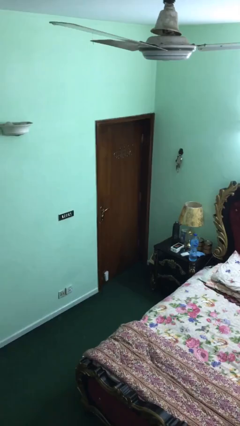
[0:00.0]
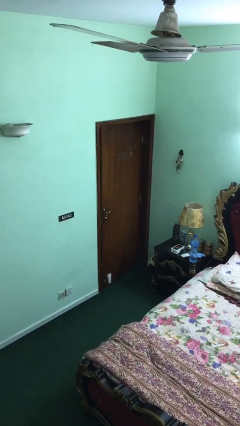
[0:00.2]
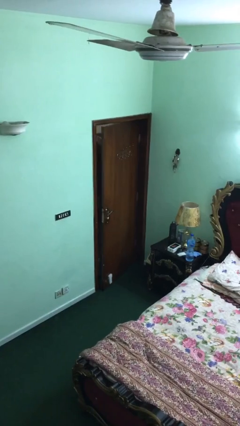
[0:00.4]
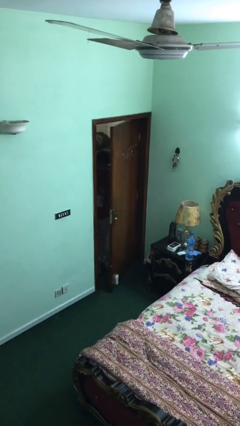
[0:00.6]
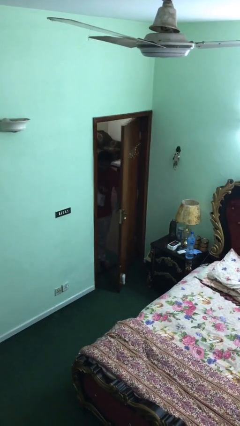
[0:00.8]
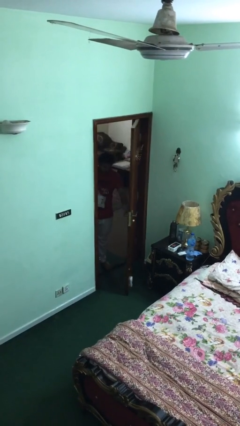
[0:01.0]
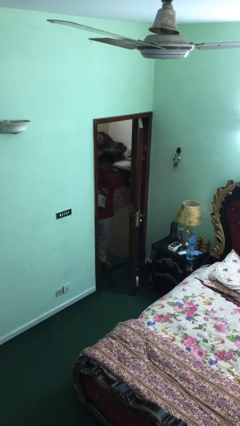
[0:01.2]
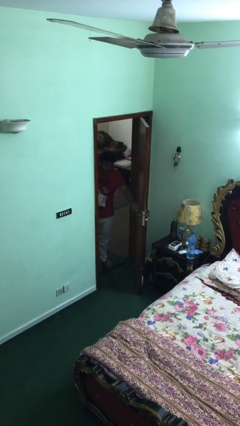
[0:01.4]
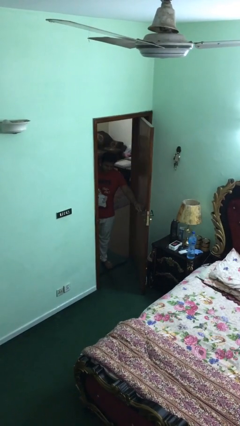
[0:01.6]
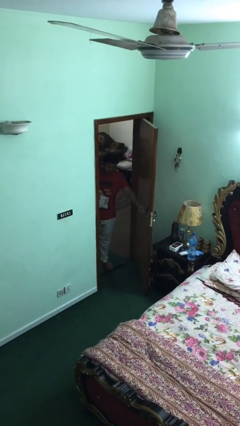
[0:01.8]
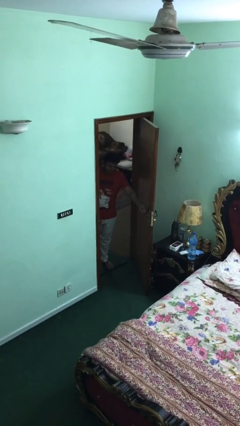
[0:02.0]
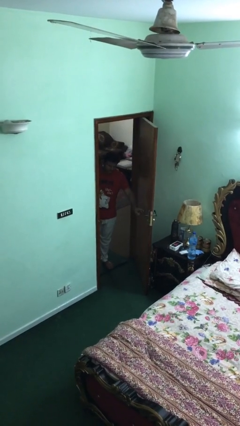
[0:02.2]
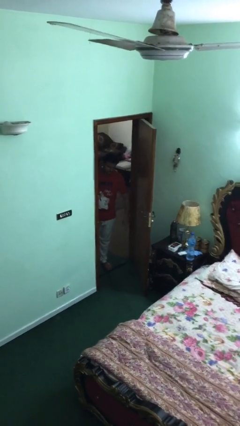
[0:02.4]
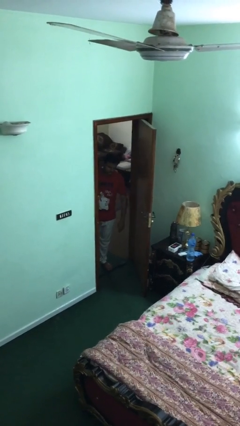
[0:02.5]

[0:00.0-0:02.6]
person opens facility door

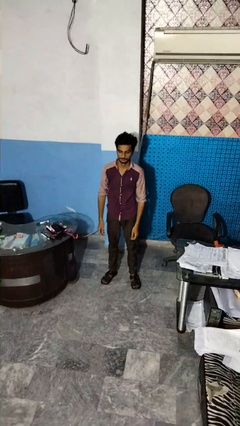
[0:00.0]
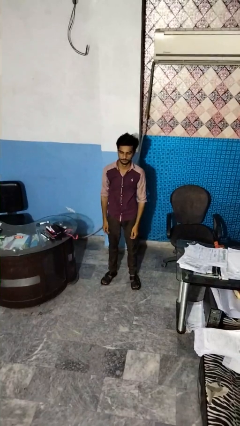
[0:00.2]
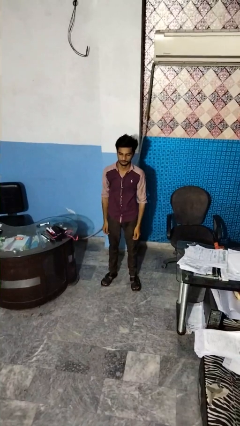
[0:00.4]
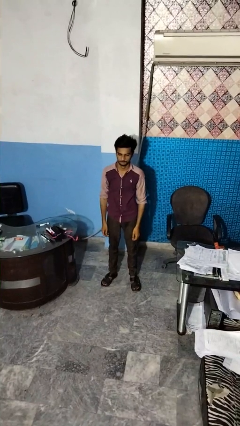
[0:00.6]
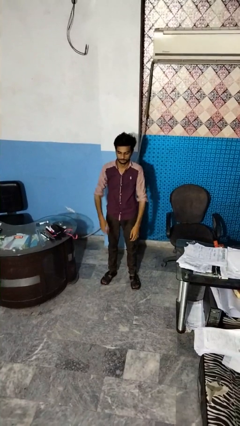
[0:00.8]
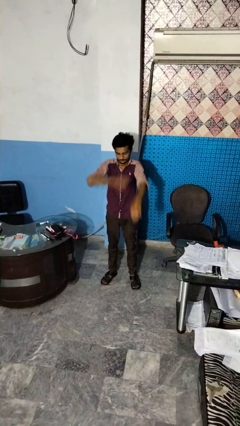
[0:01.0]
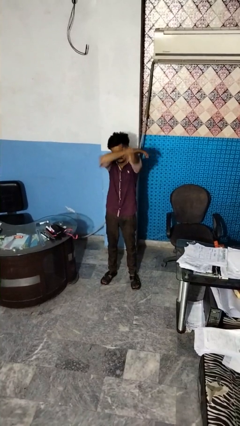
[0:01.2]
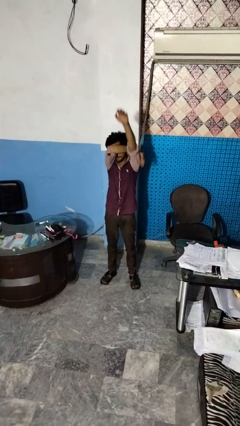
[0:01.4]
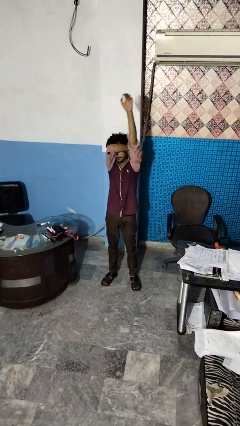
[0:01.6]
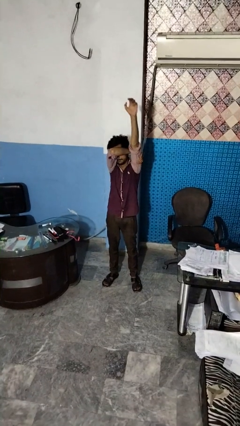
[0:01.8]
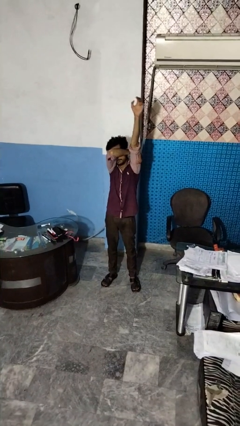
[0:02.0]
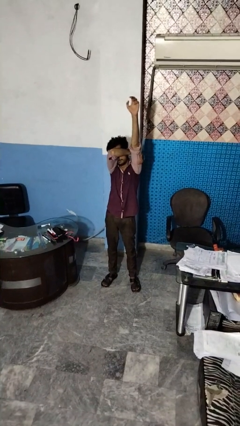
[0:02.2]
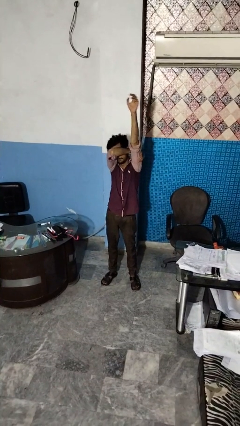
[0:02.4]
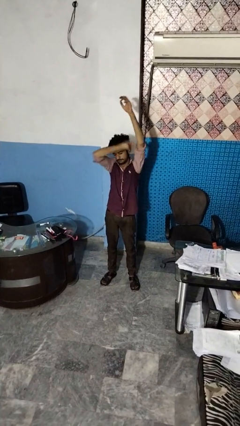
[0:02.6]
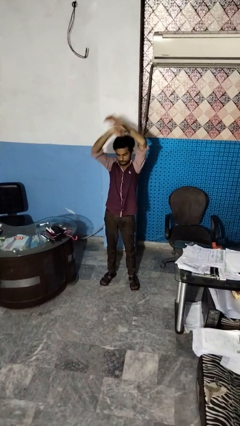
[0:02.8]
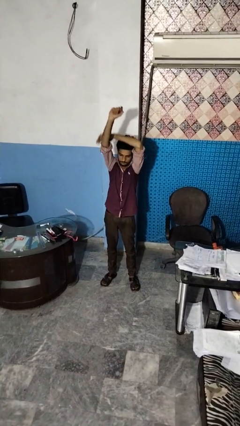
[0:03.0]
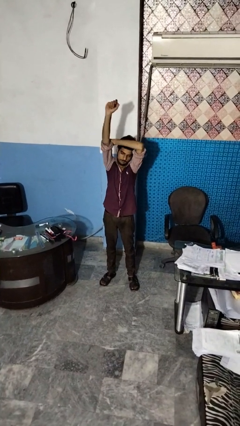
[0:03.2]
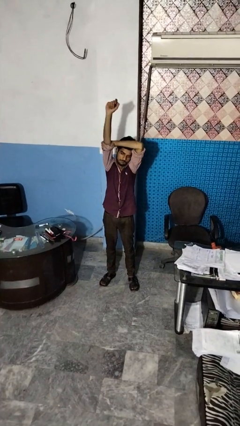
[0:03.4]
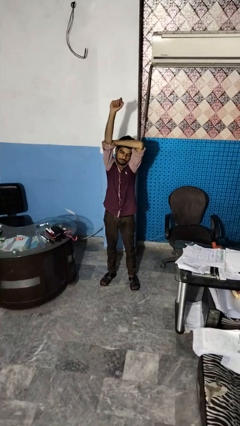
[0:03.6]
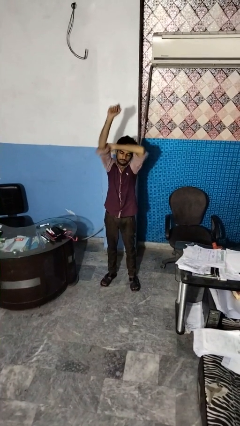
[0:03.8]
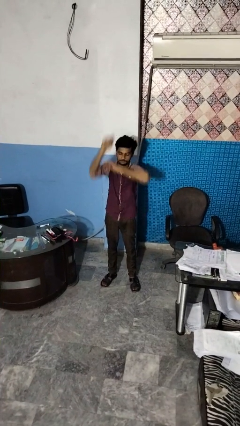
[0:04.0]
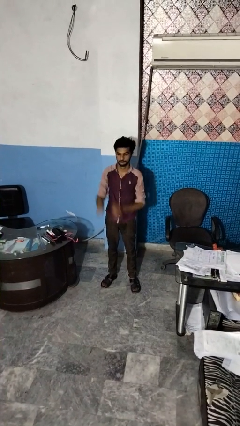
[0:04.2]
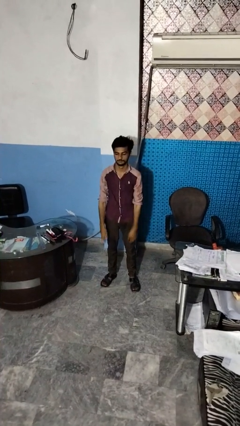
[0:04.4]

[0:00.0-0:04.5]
person stretches arms over head

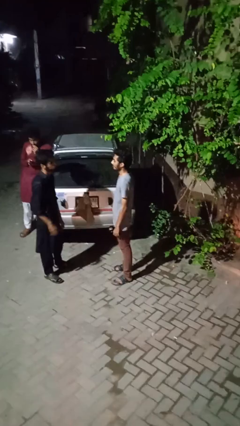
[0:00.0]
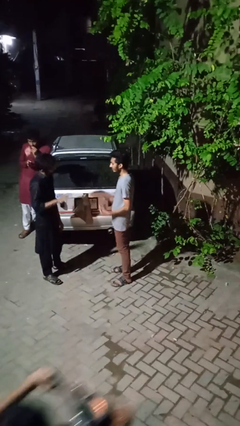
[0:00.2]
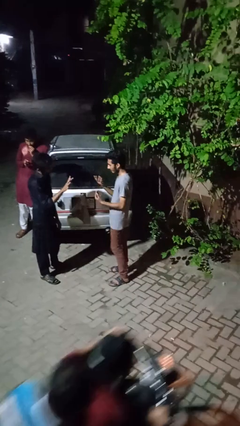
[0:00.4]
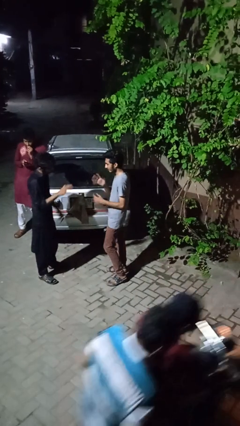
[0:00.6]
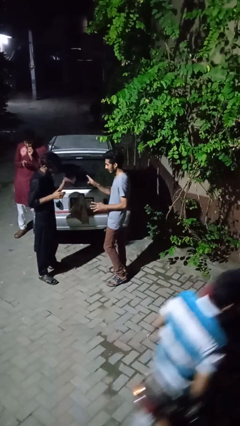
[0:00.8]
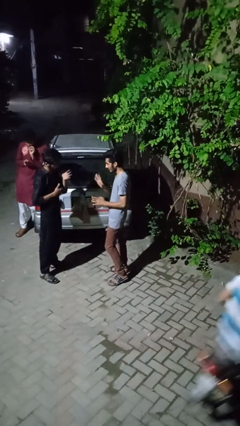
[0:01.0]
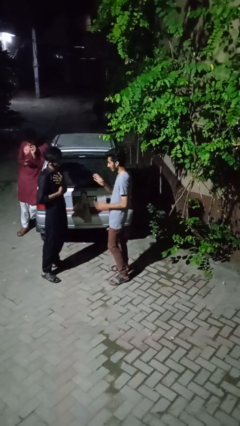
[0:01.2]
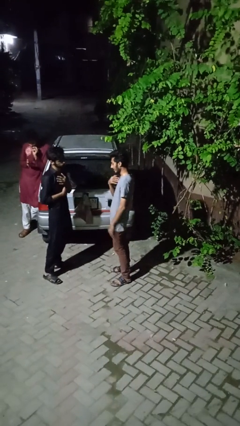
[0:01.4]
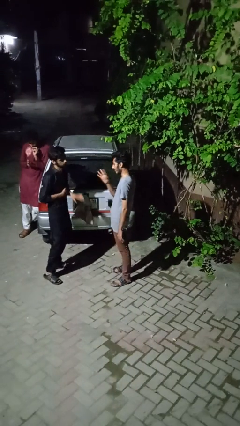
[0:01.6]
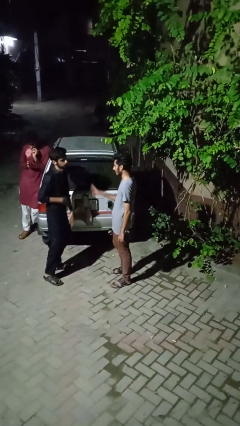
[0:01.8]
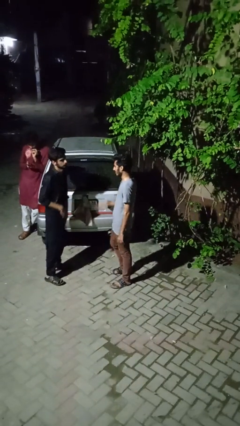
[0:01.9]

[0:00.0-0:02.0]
person talks to person

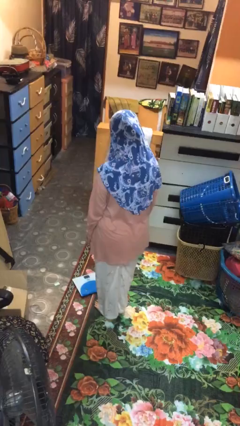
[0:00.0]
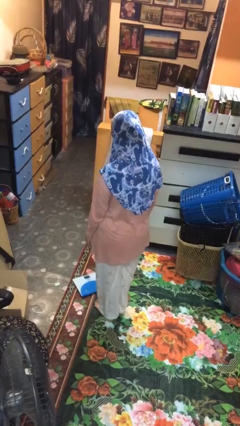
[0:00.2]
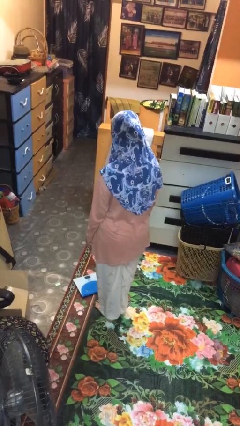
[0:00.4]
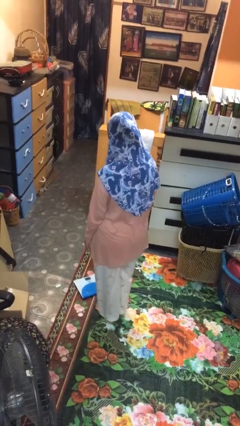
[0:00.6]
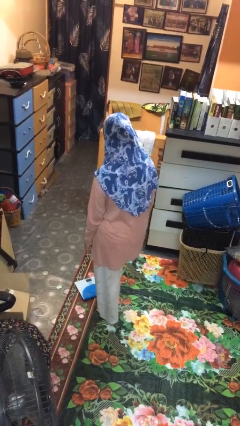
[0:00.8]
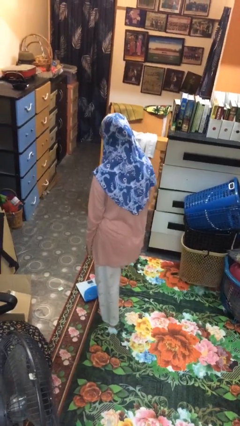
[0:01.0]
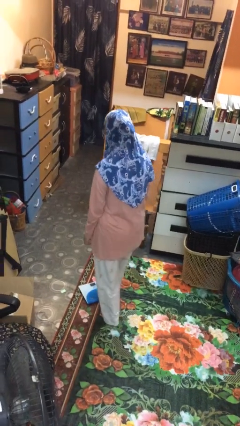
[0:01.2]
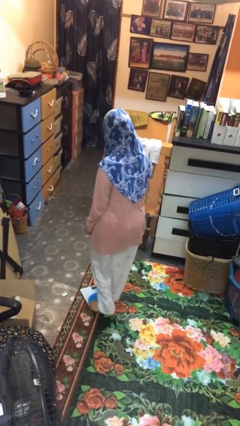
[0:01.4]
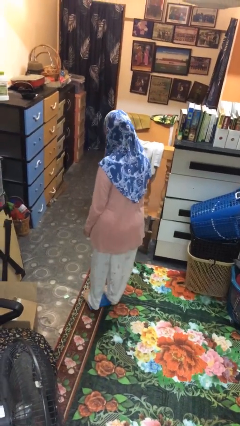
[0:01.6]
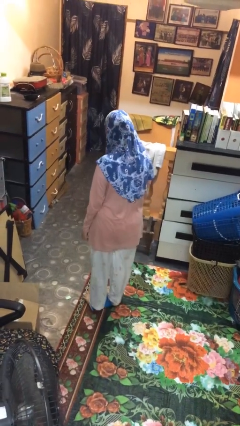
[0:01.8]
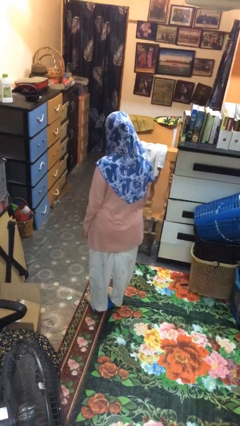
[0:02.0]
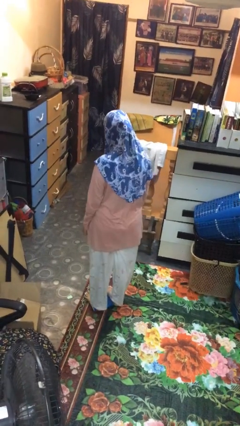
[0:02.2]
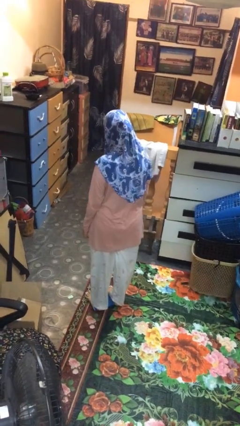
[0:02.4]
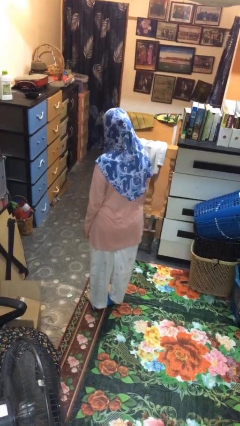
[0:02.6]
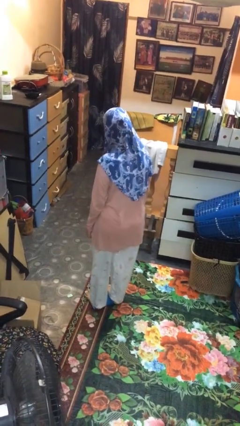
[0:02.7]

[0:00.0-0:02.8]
person uses bodyweight scale

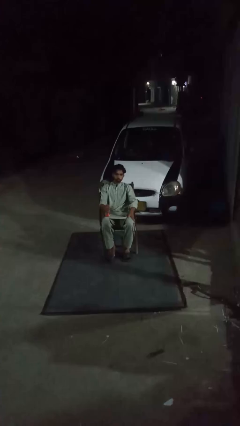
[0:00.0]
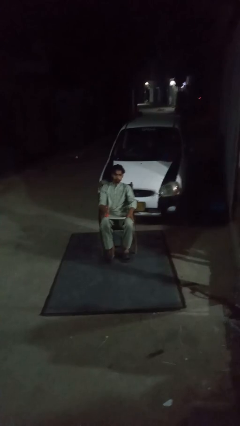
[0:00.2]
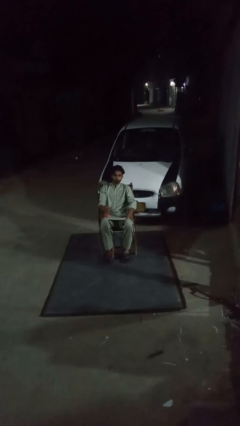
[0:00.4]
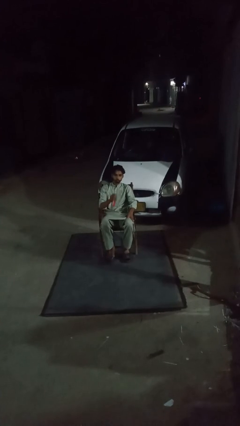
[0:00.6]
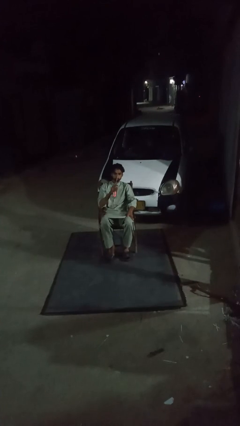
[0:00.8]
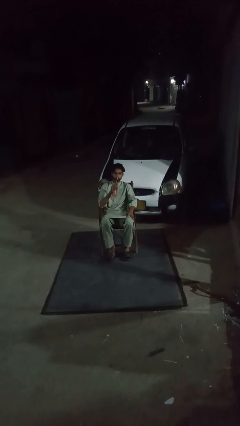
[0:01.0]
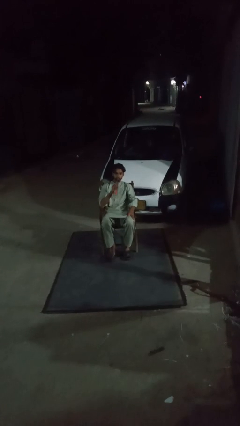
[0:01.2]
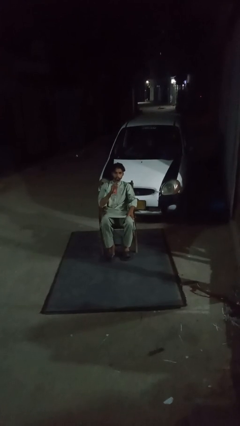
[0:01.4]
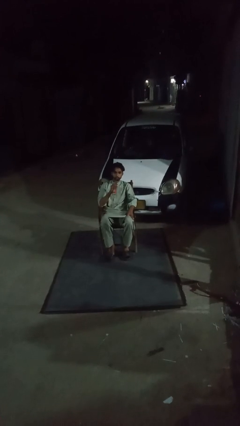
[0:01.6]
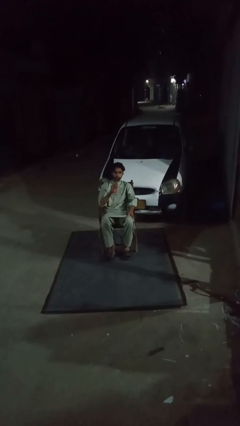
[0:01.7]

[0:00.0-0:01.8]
person drinks from straw

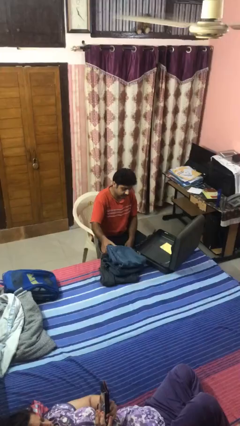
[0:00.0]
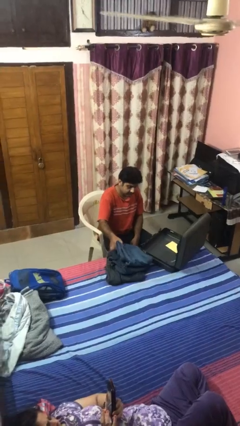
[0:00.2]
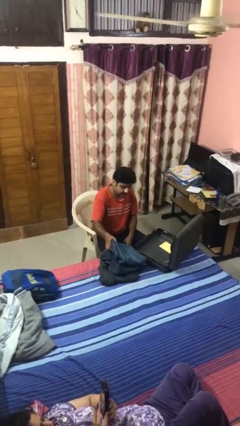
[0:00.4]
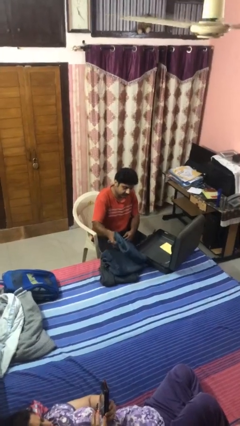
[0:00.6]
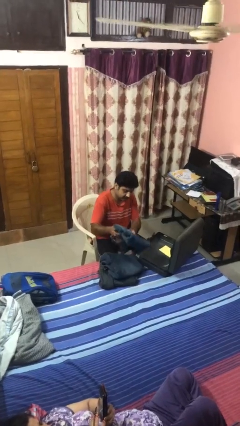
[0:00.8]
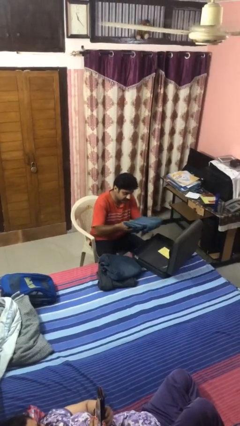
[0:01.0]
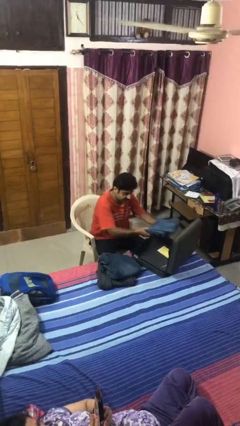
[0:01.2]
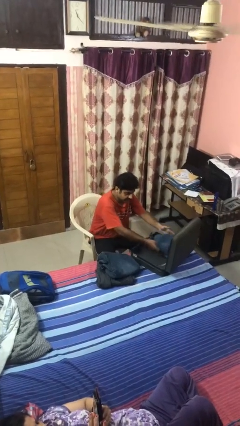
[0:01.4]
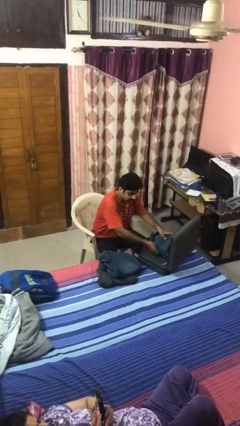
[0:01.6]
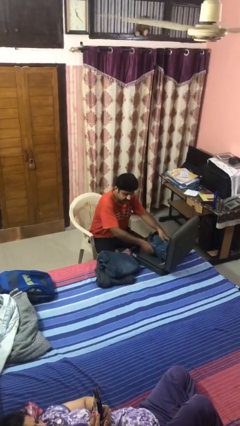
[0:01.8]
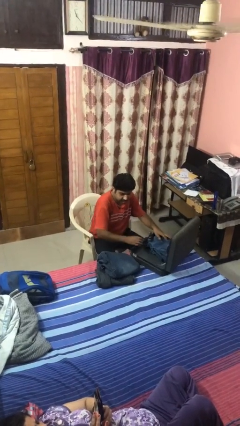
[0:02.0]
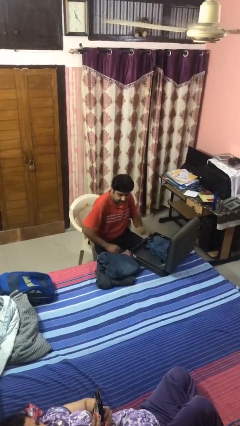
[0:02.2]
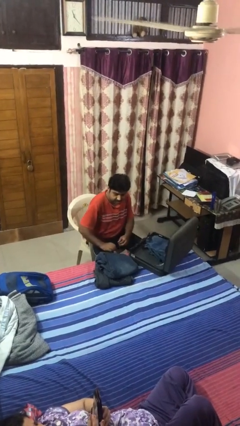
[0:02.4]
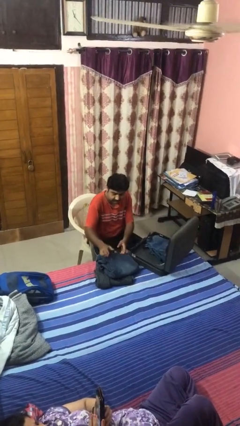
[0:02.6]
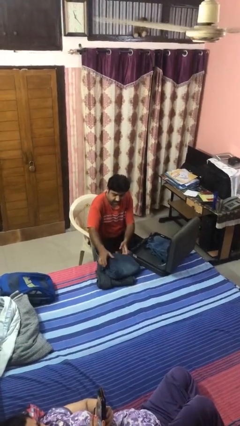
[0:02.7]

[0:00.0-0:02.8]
person loads clothes into suitcase

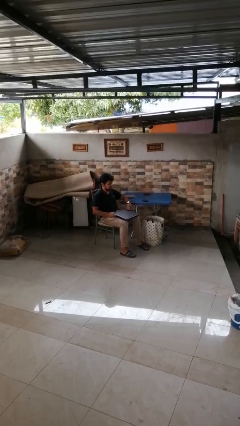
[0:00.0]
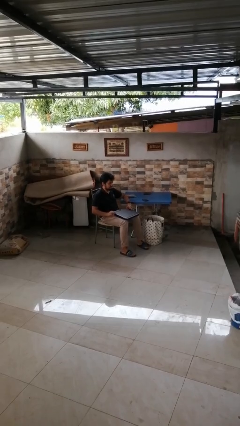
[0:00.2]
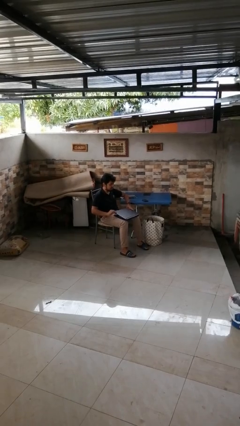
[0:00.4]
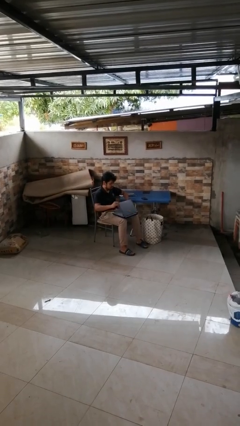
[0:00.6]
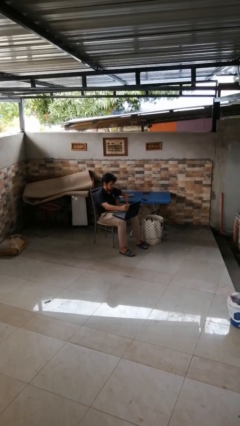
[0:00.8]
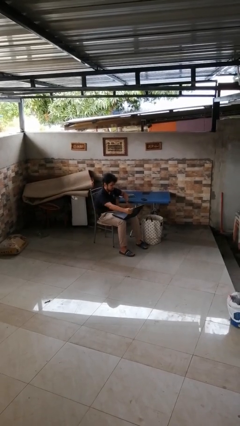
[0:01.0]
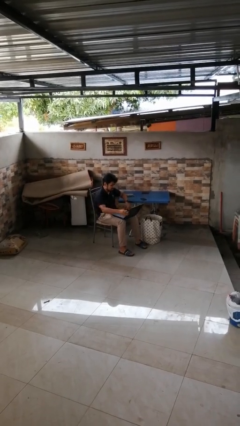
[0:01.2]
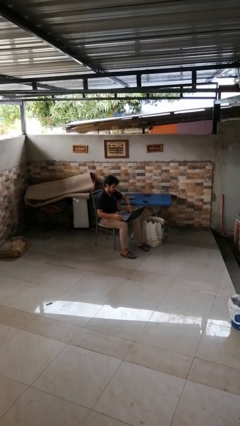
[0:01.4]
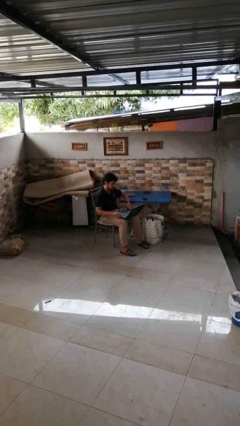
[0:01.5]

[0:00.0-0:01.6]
person opens laptop
